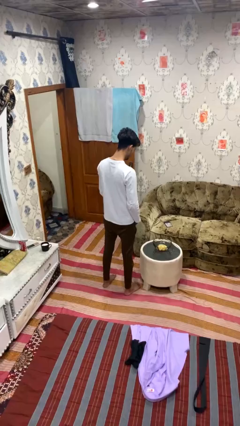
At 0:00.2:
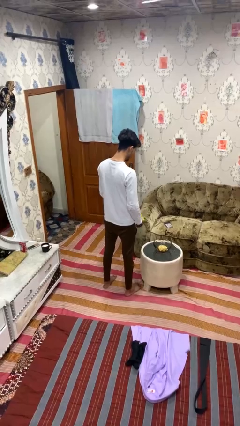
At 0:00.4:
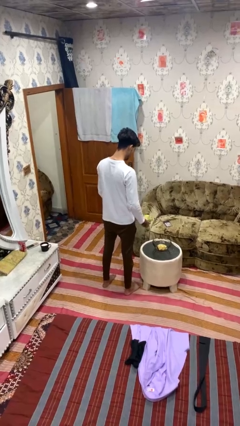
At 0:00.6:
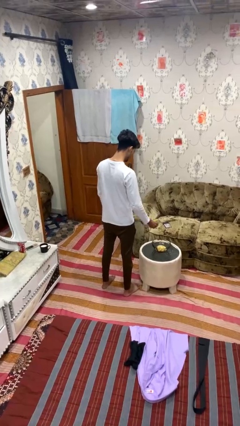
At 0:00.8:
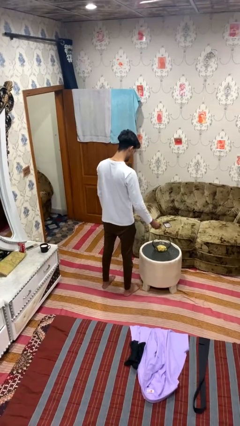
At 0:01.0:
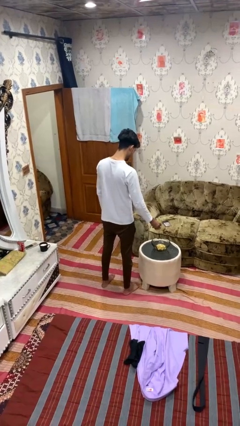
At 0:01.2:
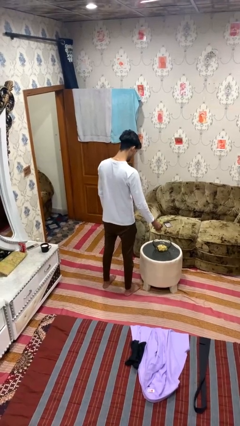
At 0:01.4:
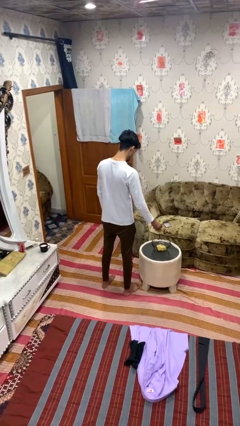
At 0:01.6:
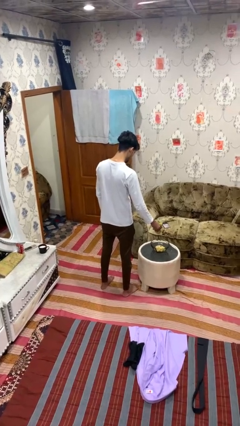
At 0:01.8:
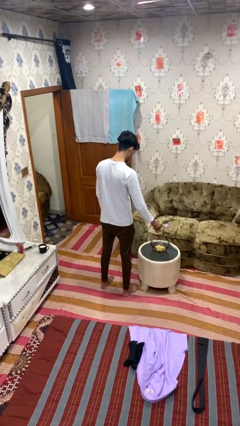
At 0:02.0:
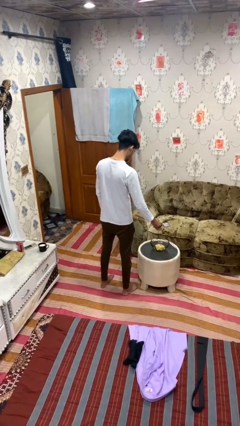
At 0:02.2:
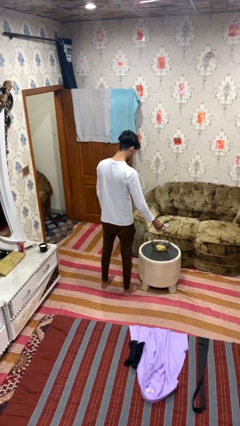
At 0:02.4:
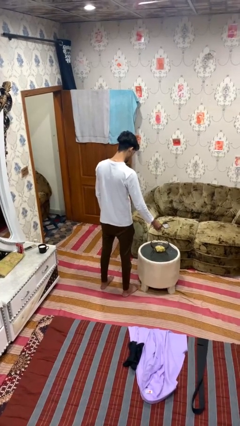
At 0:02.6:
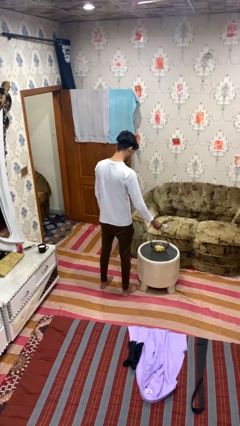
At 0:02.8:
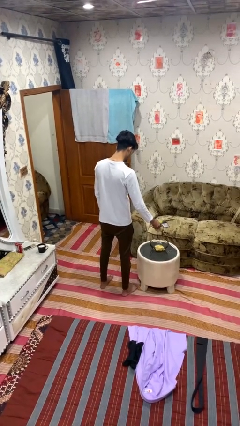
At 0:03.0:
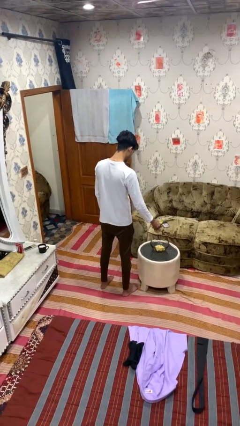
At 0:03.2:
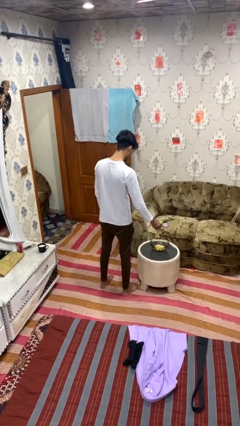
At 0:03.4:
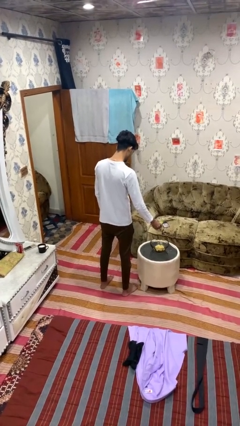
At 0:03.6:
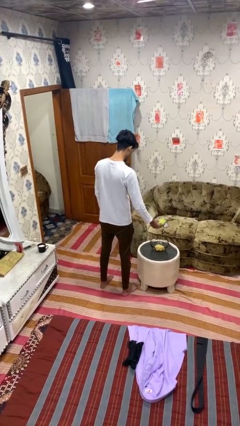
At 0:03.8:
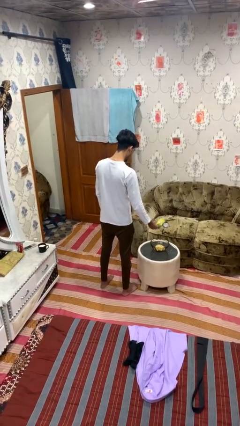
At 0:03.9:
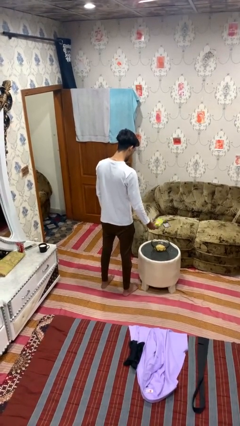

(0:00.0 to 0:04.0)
person pours into bowl

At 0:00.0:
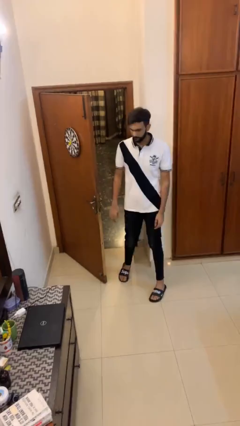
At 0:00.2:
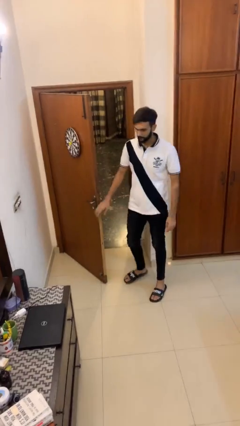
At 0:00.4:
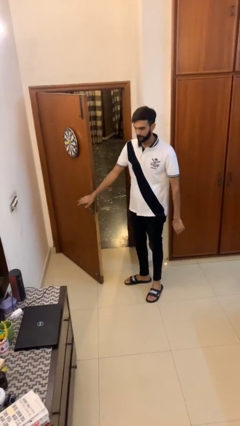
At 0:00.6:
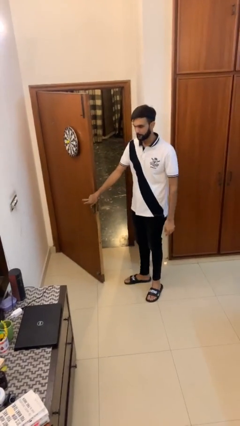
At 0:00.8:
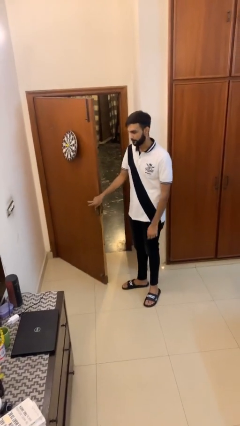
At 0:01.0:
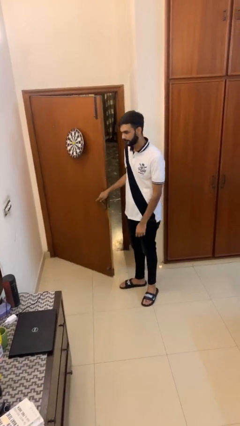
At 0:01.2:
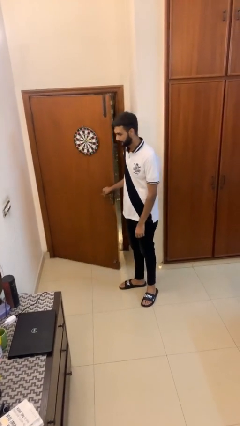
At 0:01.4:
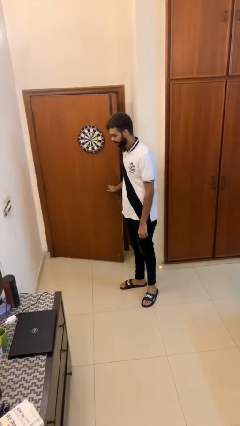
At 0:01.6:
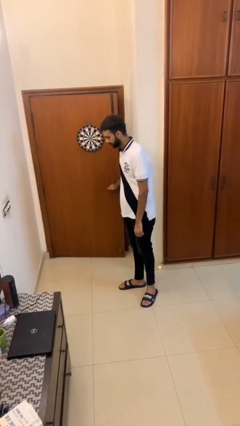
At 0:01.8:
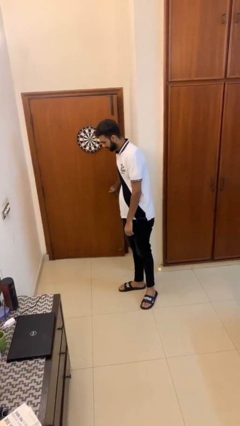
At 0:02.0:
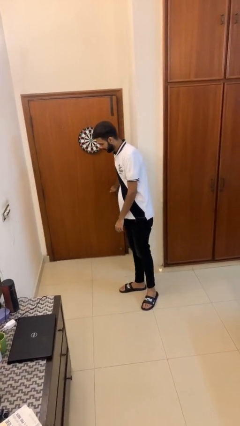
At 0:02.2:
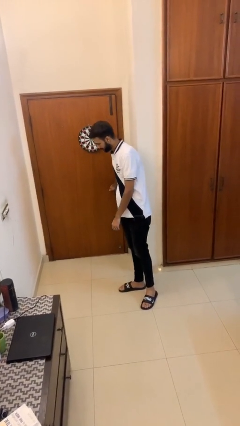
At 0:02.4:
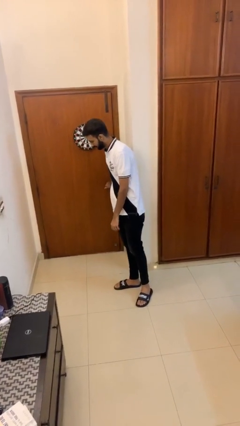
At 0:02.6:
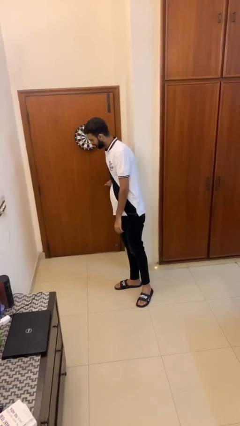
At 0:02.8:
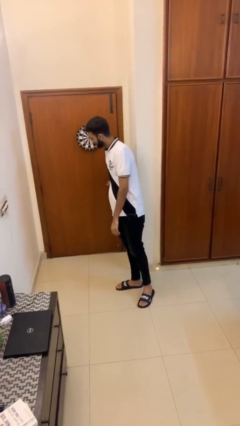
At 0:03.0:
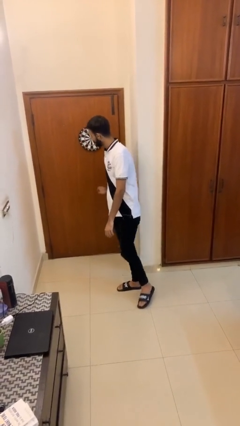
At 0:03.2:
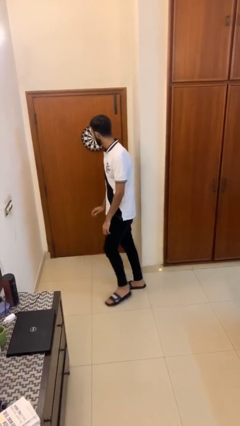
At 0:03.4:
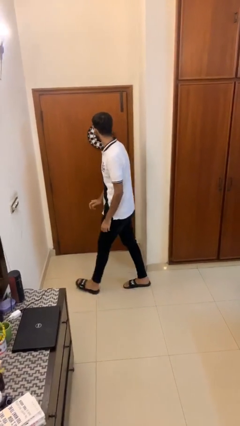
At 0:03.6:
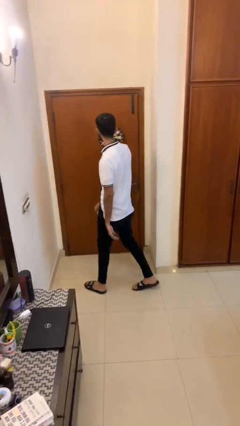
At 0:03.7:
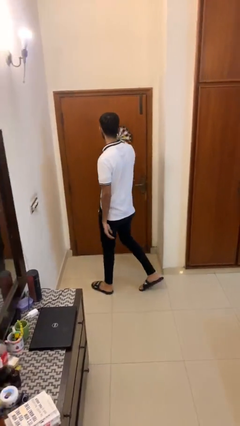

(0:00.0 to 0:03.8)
person closes facility door

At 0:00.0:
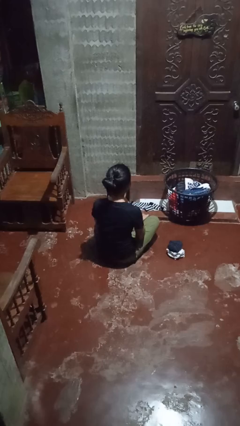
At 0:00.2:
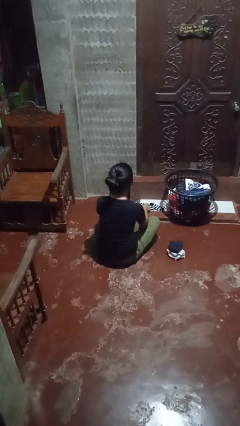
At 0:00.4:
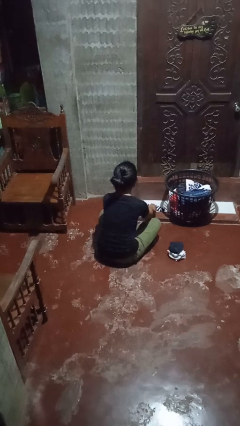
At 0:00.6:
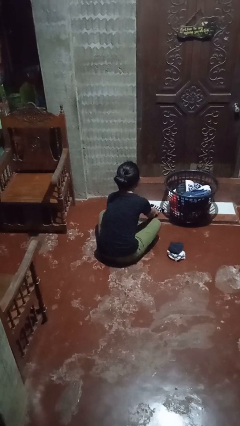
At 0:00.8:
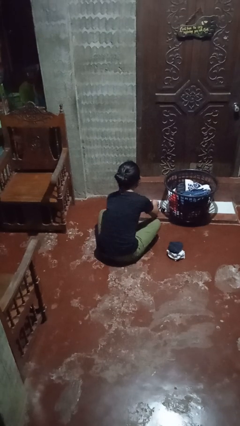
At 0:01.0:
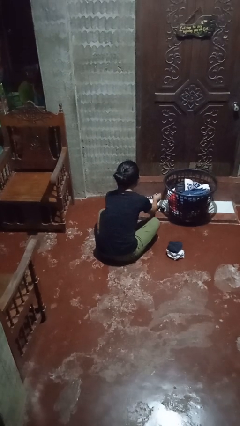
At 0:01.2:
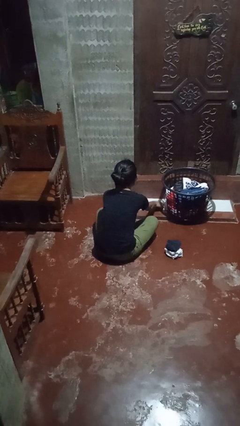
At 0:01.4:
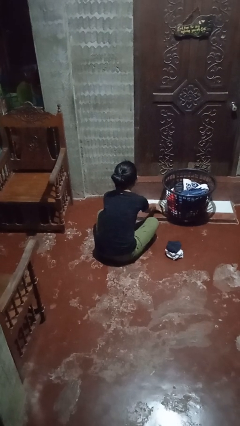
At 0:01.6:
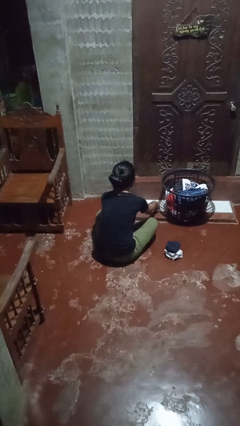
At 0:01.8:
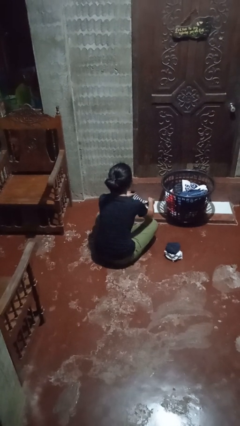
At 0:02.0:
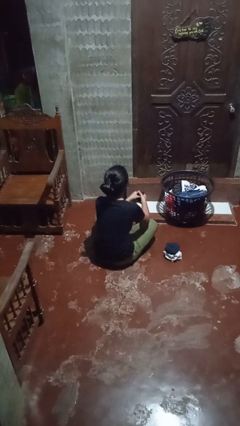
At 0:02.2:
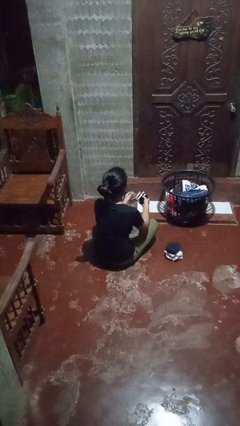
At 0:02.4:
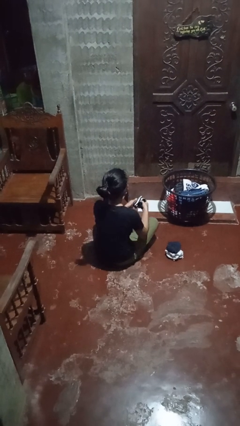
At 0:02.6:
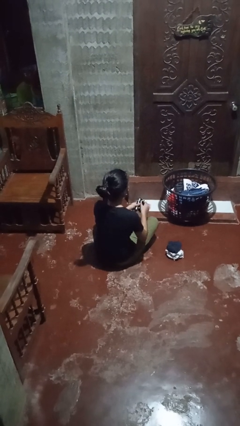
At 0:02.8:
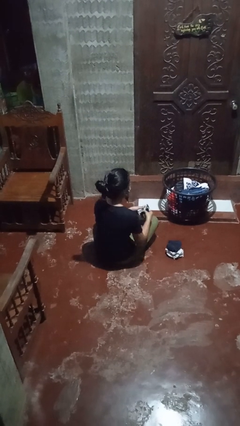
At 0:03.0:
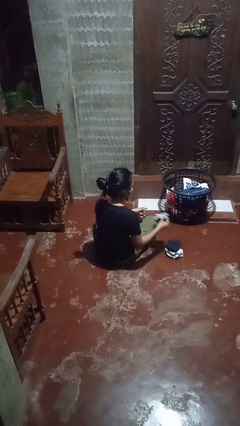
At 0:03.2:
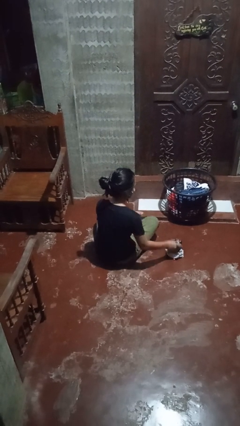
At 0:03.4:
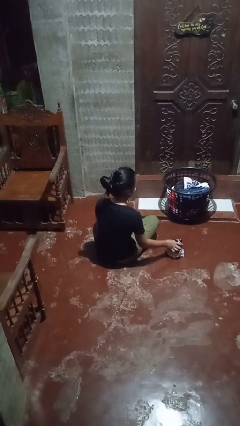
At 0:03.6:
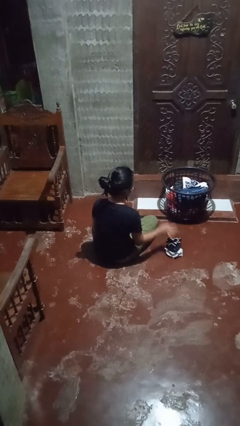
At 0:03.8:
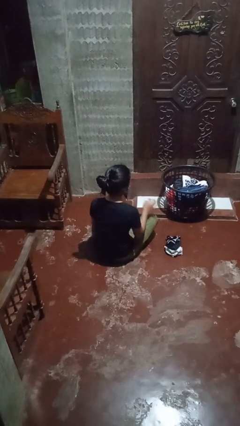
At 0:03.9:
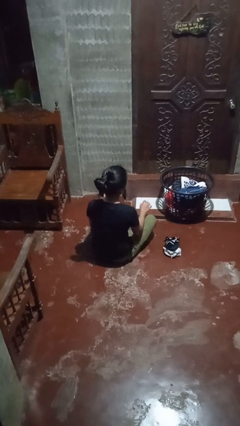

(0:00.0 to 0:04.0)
person folds socks

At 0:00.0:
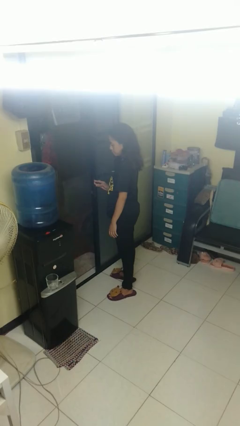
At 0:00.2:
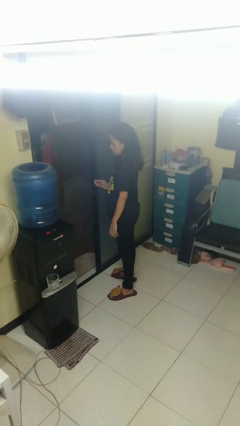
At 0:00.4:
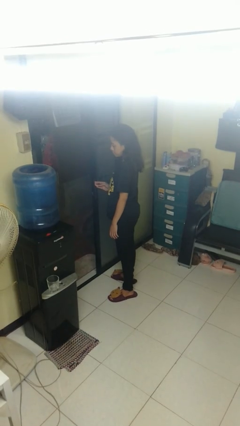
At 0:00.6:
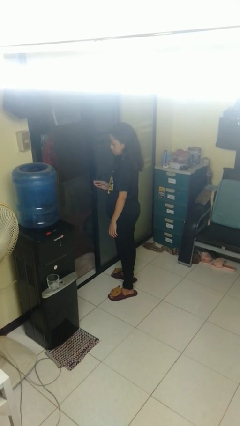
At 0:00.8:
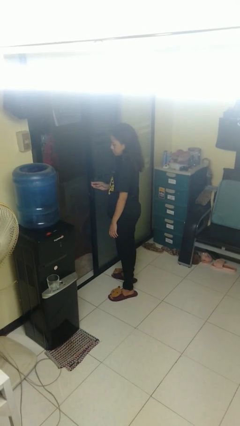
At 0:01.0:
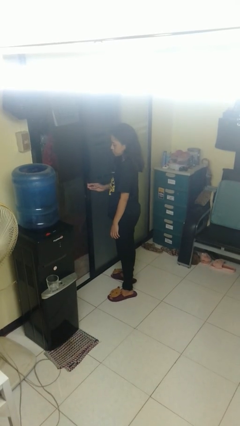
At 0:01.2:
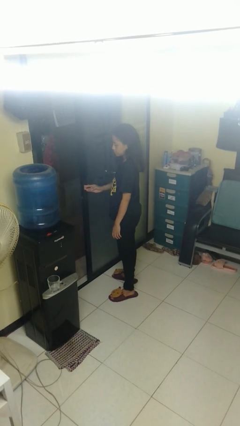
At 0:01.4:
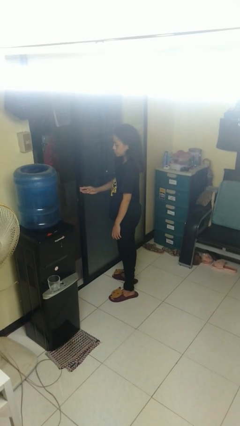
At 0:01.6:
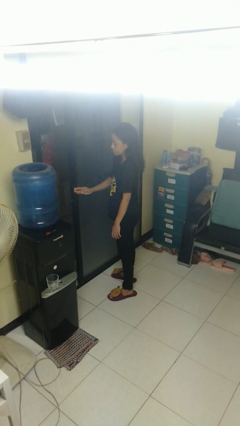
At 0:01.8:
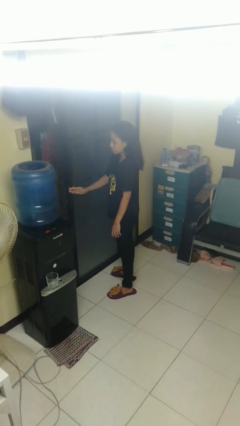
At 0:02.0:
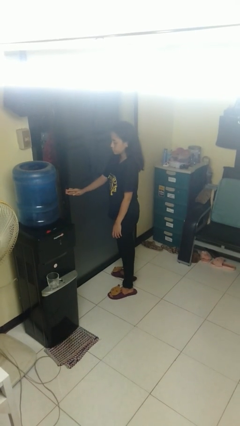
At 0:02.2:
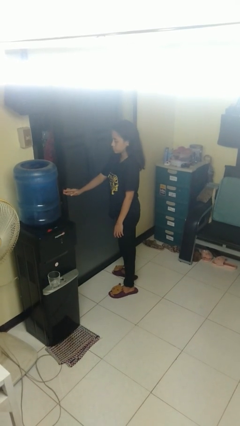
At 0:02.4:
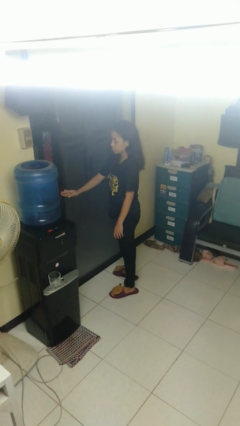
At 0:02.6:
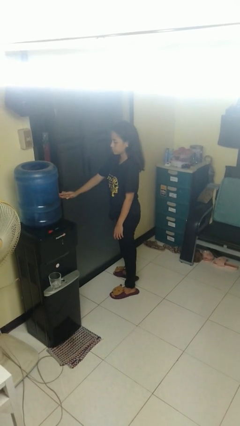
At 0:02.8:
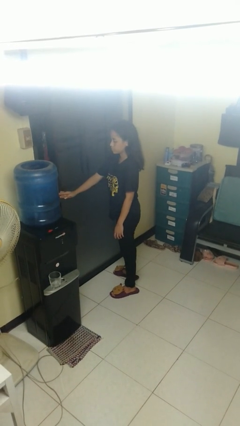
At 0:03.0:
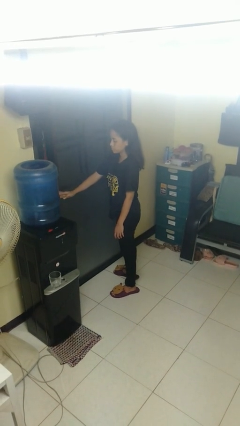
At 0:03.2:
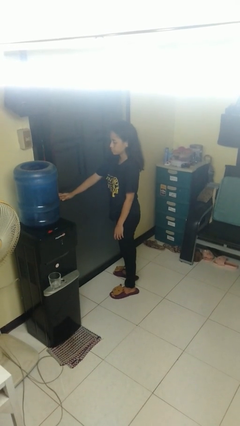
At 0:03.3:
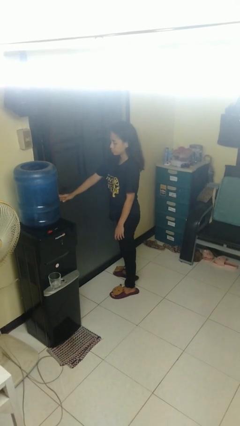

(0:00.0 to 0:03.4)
person closes sliding door

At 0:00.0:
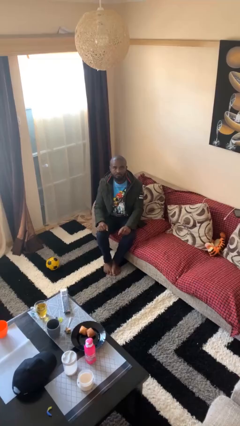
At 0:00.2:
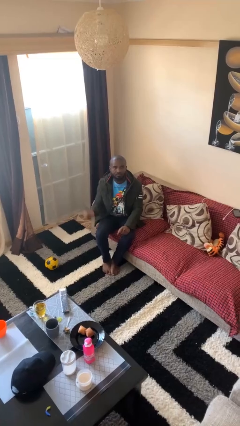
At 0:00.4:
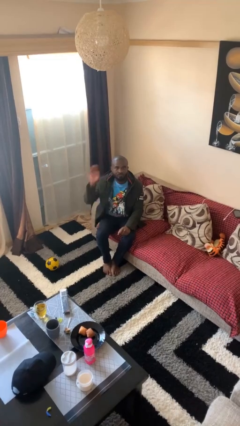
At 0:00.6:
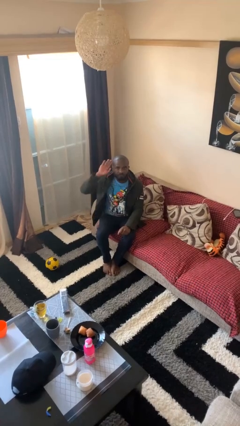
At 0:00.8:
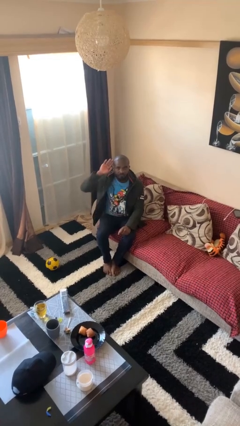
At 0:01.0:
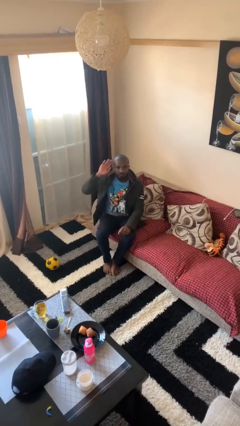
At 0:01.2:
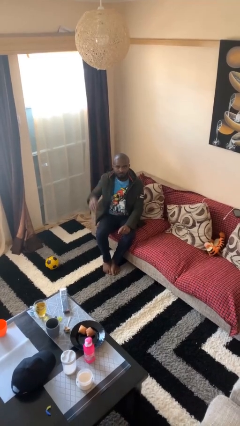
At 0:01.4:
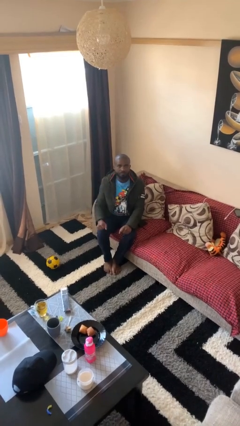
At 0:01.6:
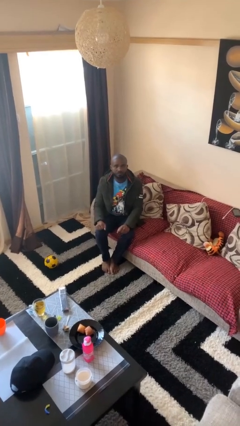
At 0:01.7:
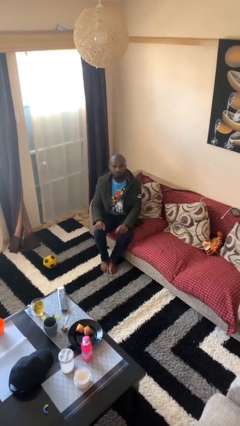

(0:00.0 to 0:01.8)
person salutes

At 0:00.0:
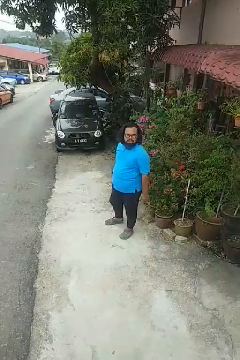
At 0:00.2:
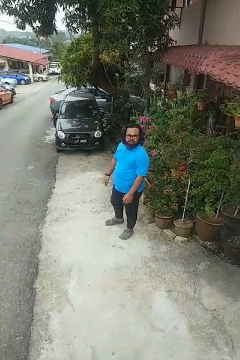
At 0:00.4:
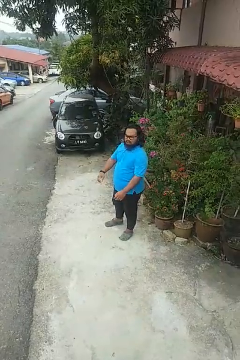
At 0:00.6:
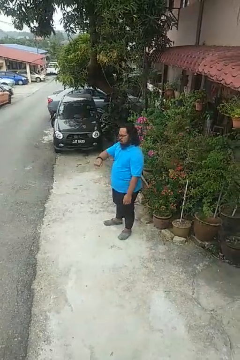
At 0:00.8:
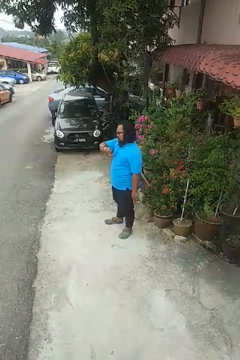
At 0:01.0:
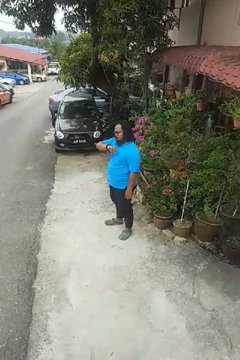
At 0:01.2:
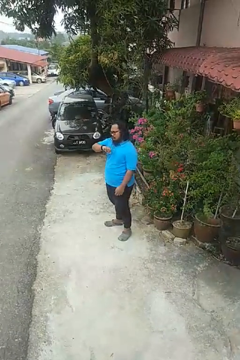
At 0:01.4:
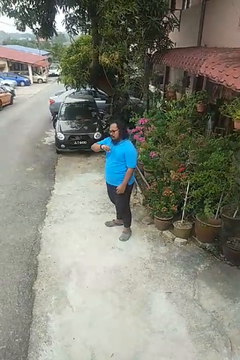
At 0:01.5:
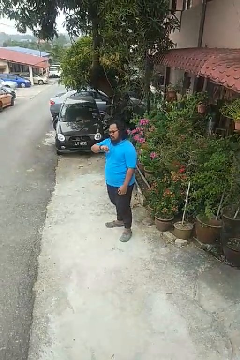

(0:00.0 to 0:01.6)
person looks at wristwatch
